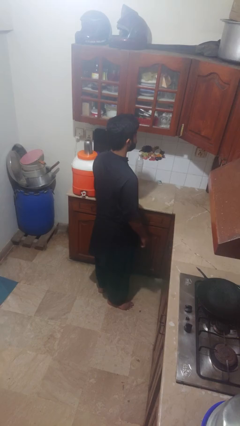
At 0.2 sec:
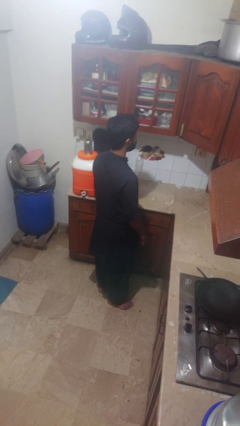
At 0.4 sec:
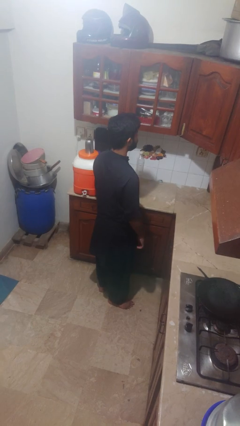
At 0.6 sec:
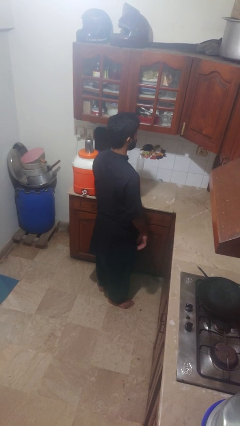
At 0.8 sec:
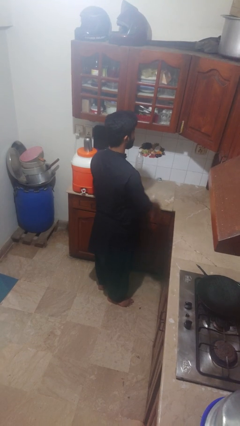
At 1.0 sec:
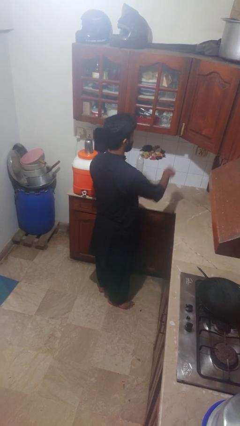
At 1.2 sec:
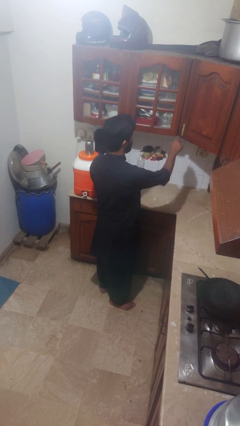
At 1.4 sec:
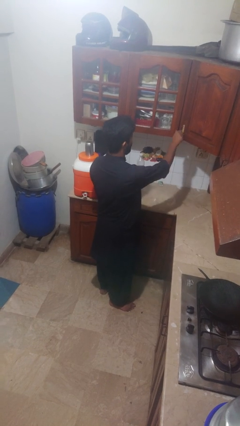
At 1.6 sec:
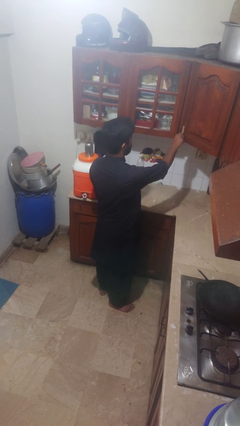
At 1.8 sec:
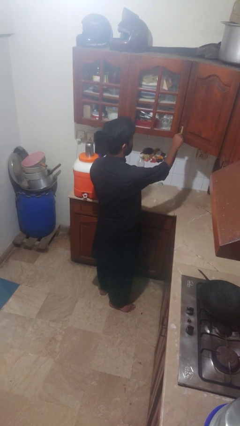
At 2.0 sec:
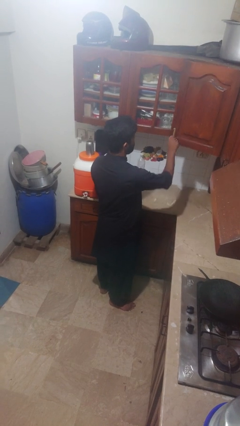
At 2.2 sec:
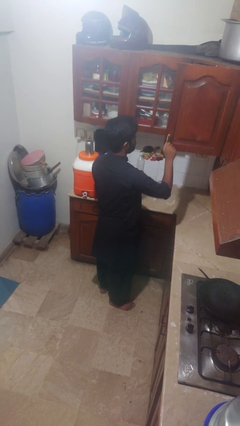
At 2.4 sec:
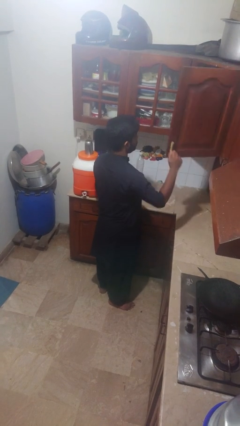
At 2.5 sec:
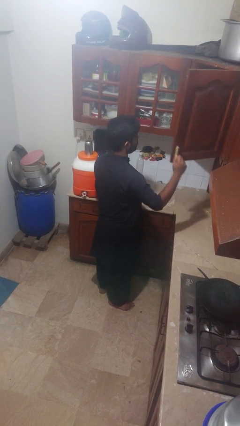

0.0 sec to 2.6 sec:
person opens cabinet

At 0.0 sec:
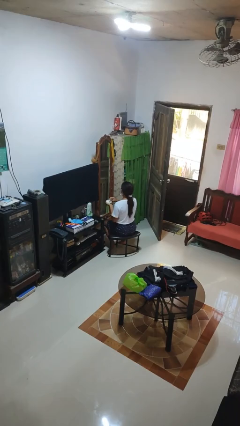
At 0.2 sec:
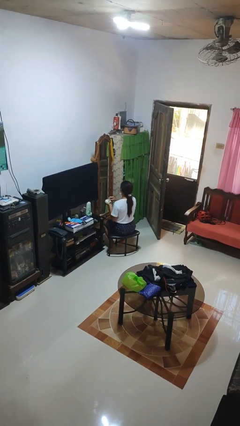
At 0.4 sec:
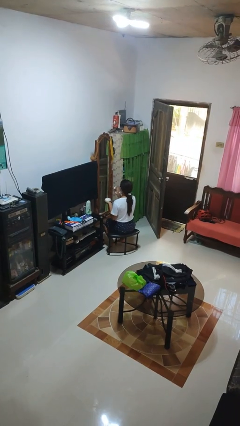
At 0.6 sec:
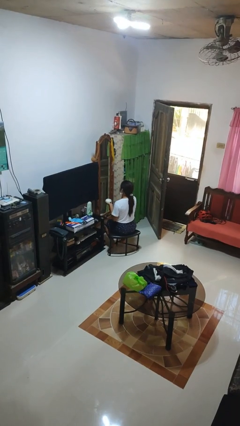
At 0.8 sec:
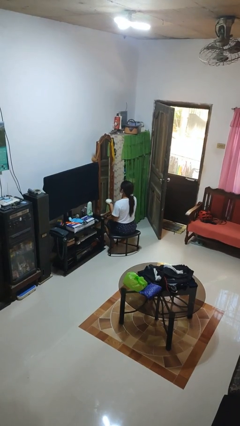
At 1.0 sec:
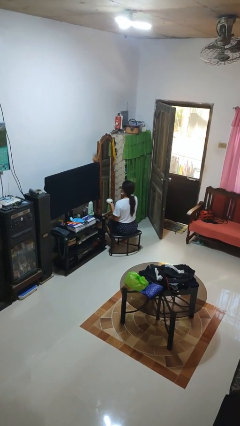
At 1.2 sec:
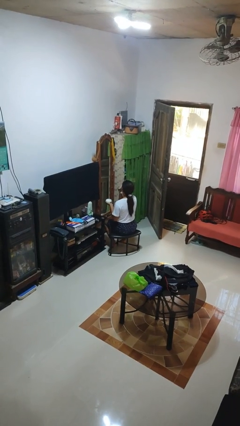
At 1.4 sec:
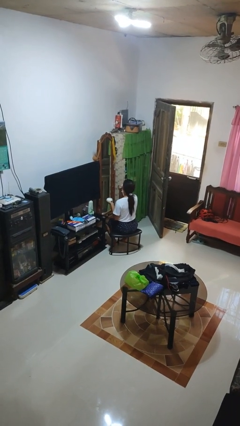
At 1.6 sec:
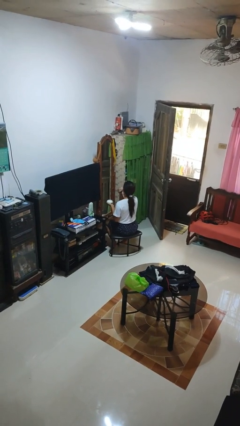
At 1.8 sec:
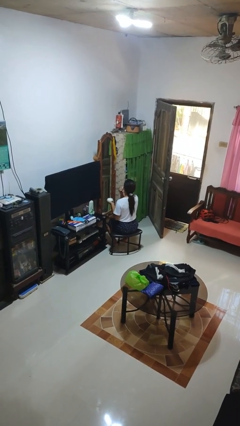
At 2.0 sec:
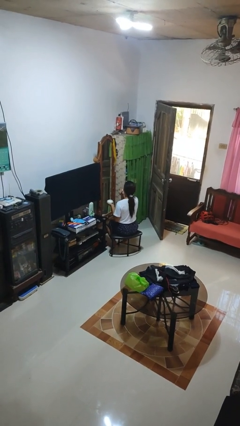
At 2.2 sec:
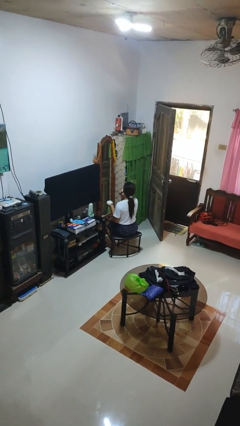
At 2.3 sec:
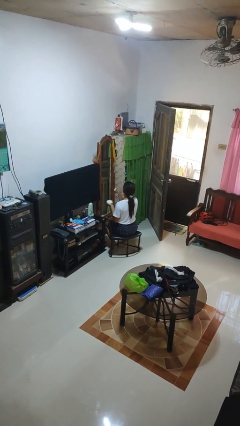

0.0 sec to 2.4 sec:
person applies foundation makeup

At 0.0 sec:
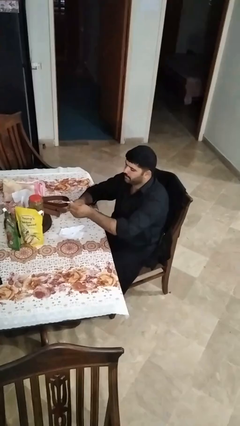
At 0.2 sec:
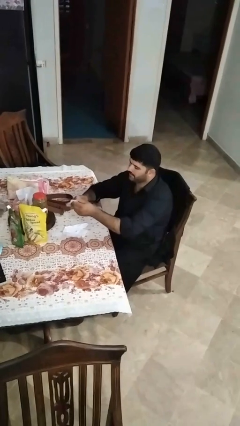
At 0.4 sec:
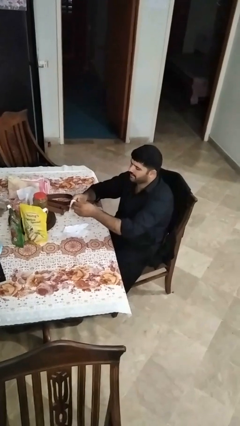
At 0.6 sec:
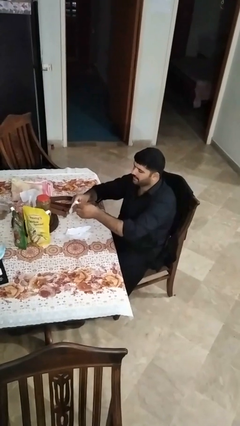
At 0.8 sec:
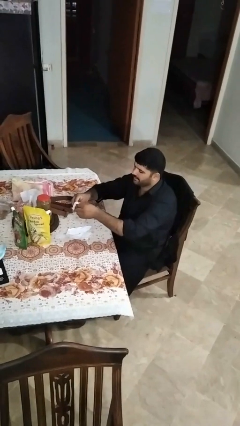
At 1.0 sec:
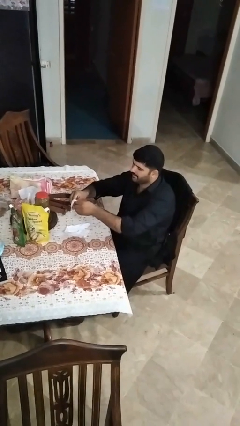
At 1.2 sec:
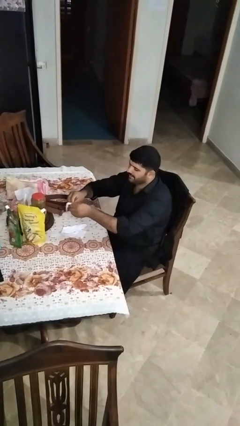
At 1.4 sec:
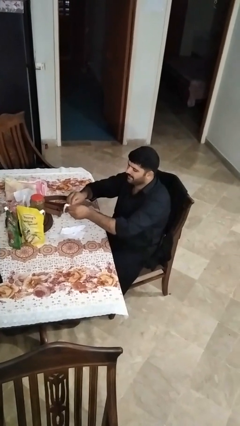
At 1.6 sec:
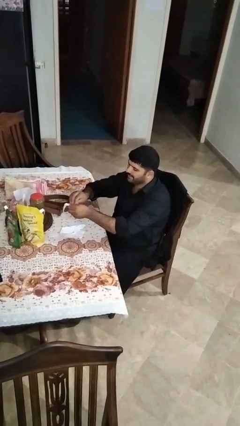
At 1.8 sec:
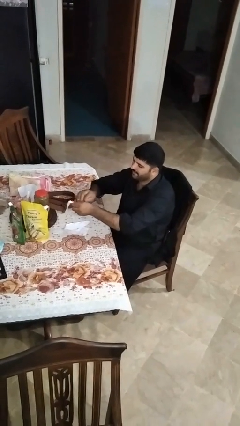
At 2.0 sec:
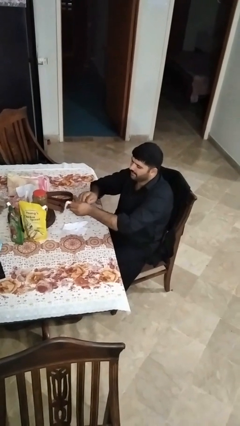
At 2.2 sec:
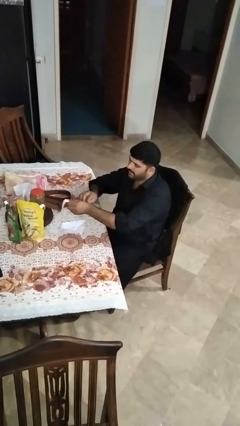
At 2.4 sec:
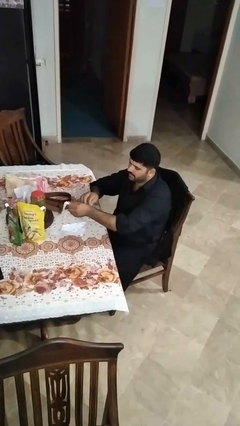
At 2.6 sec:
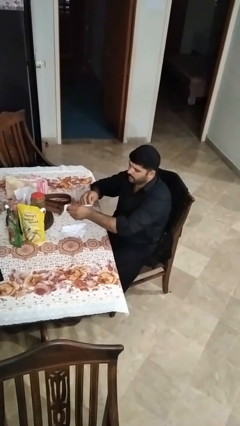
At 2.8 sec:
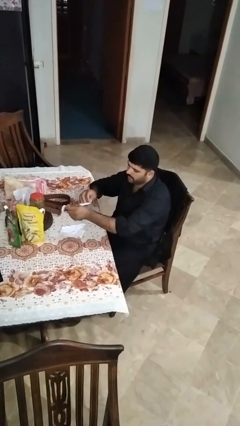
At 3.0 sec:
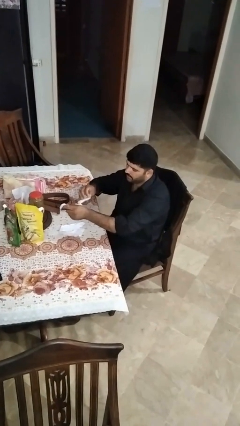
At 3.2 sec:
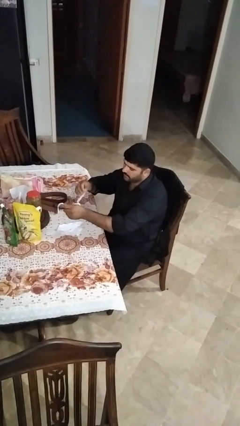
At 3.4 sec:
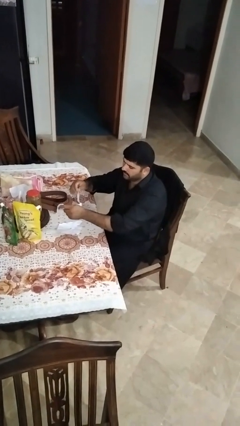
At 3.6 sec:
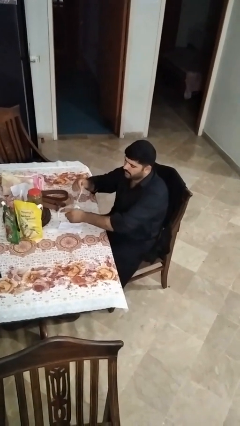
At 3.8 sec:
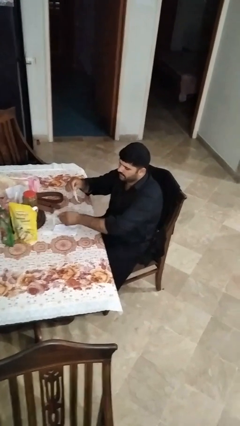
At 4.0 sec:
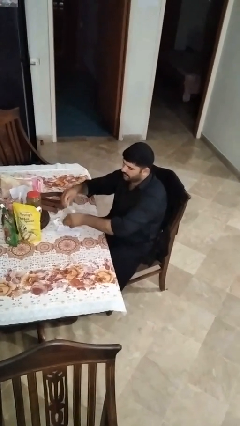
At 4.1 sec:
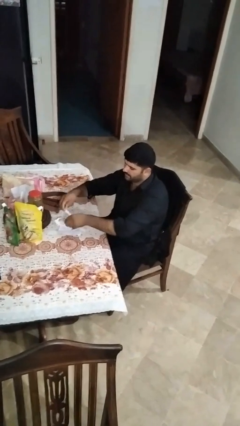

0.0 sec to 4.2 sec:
person tears paper

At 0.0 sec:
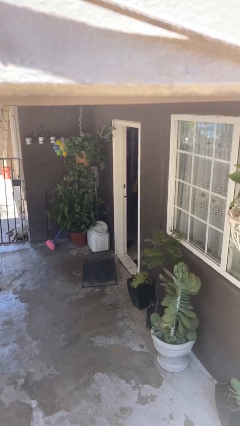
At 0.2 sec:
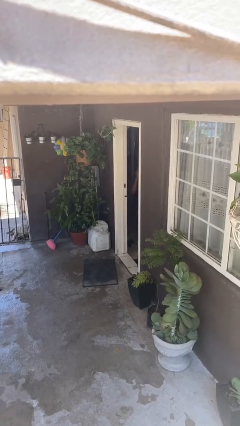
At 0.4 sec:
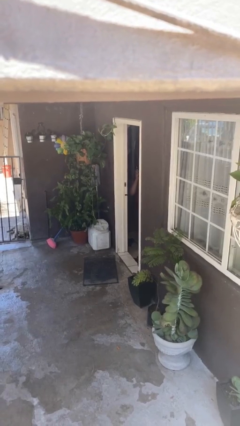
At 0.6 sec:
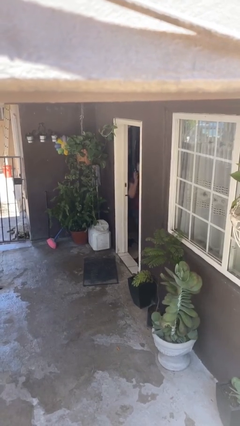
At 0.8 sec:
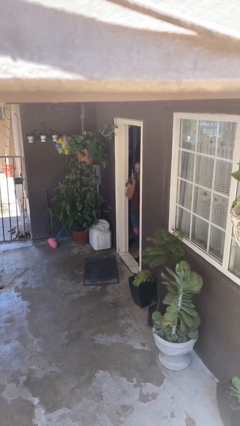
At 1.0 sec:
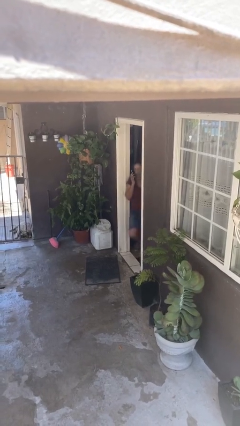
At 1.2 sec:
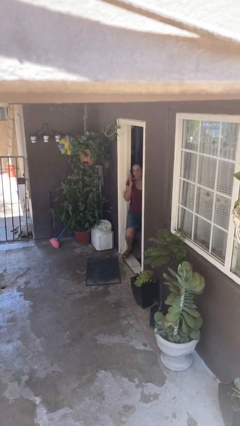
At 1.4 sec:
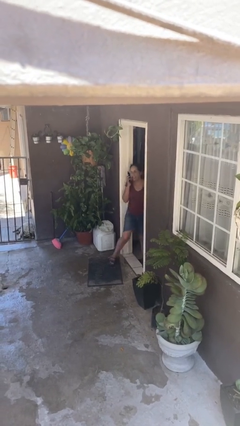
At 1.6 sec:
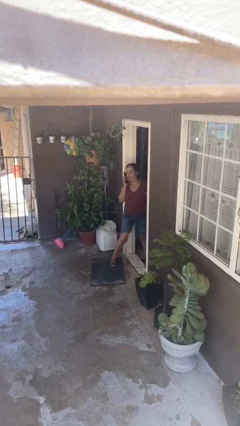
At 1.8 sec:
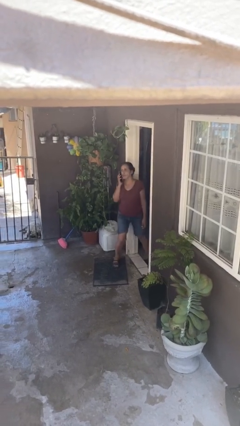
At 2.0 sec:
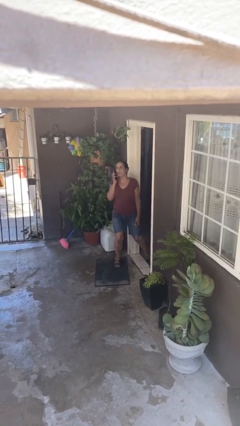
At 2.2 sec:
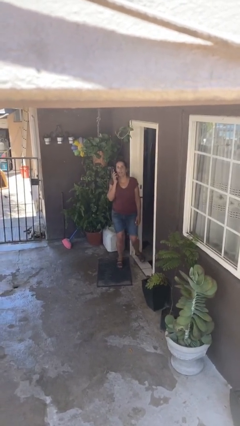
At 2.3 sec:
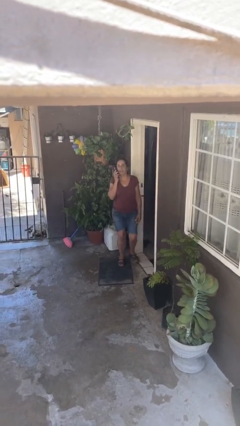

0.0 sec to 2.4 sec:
person enters scene through structure

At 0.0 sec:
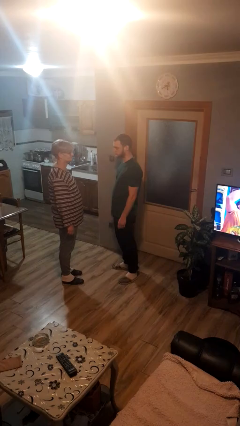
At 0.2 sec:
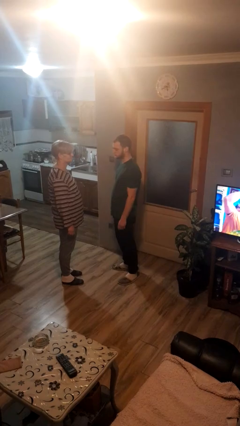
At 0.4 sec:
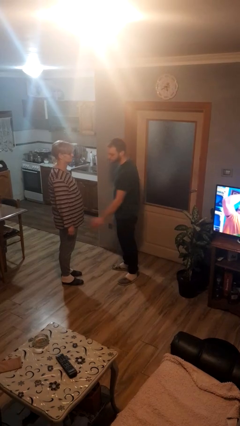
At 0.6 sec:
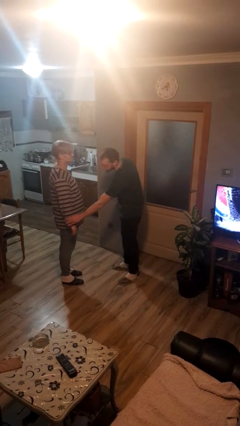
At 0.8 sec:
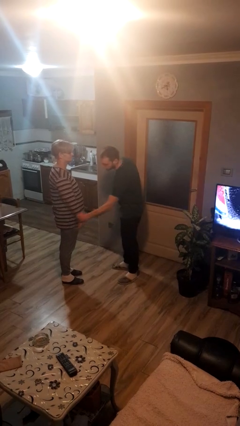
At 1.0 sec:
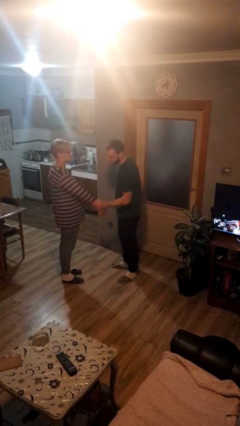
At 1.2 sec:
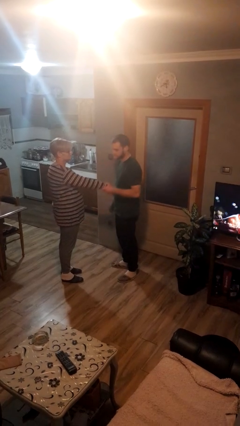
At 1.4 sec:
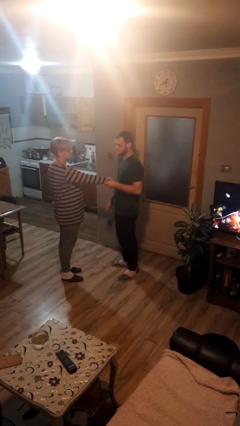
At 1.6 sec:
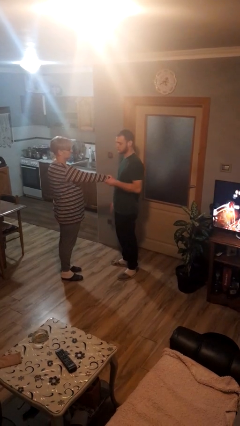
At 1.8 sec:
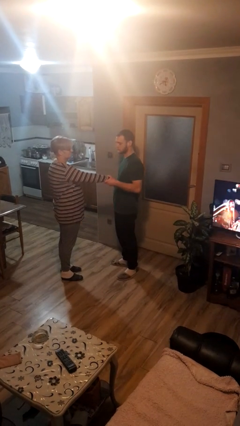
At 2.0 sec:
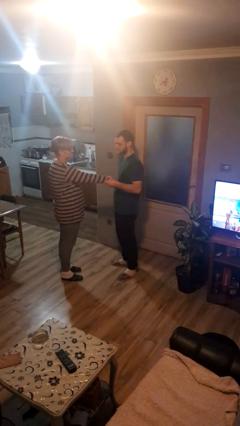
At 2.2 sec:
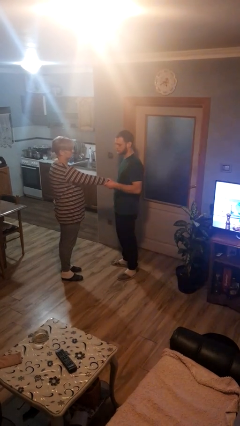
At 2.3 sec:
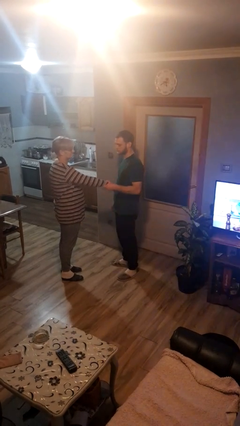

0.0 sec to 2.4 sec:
person grabs person by forearm

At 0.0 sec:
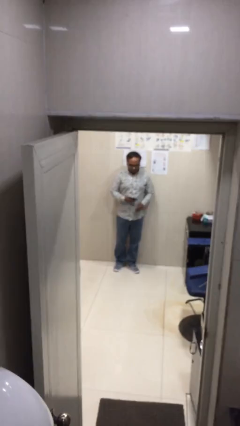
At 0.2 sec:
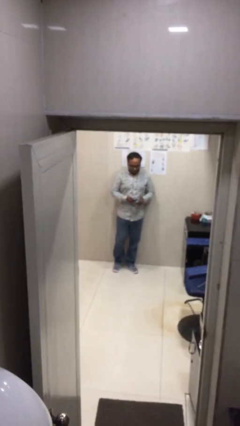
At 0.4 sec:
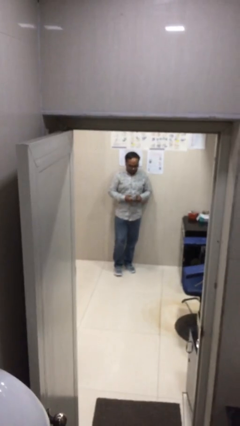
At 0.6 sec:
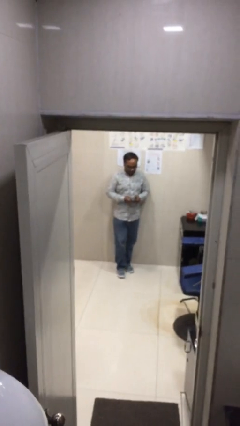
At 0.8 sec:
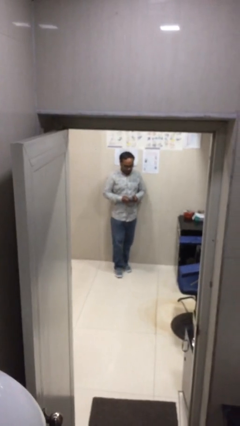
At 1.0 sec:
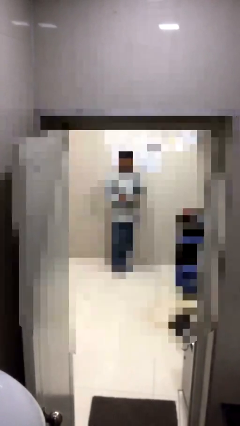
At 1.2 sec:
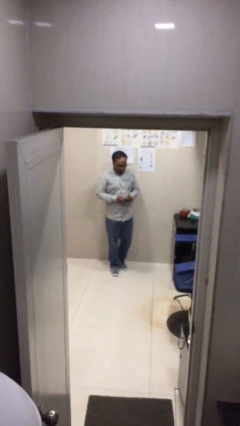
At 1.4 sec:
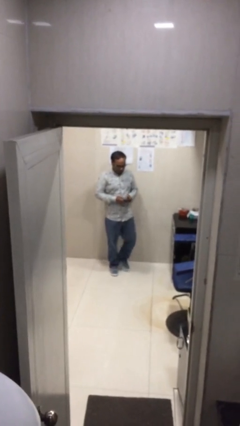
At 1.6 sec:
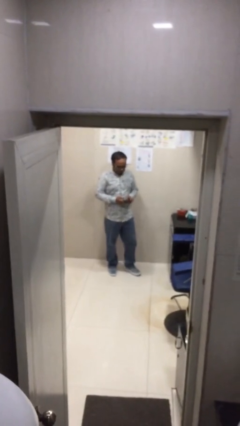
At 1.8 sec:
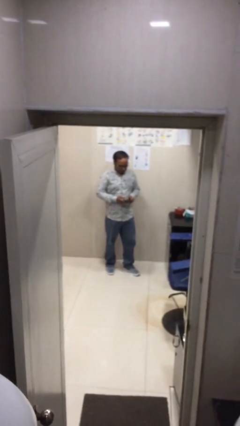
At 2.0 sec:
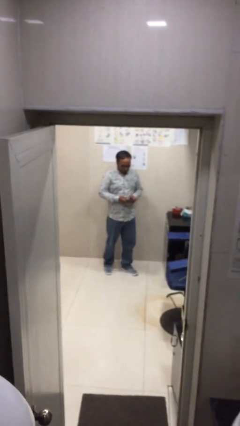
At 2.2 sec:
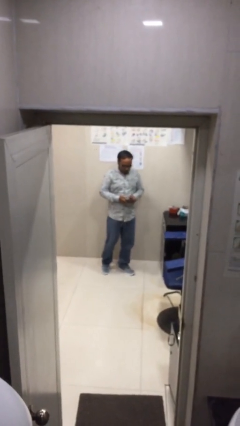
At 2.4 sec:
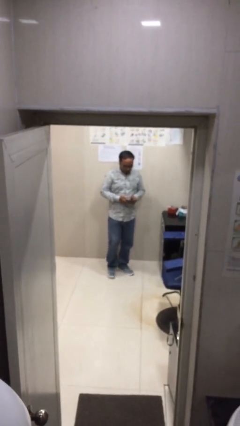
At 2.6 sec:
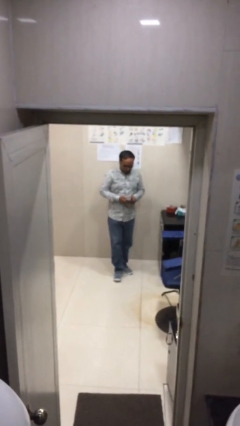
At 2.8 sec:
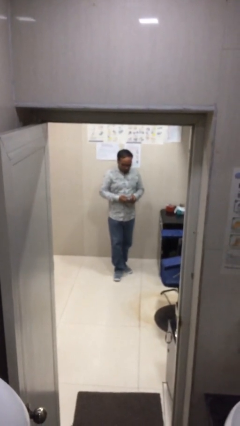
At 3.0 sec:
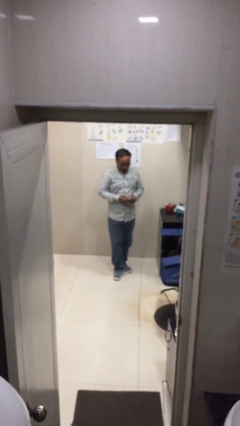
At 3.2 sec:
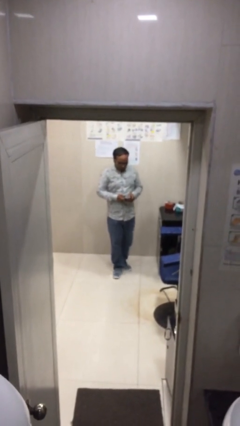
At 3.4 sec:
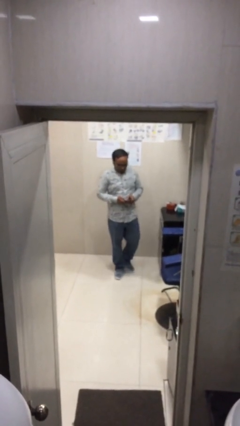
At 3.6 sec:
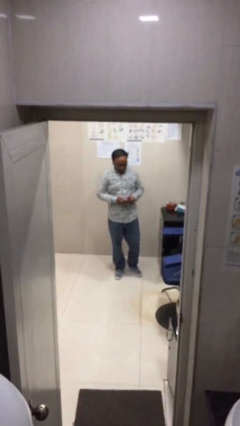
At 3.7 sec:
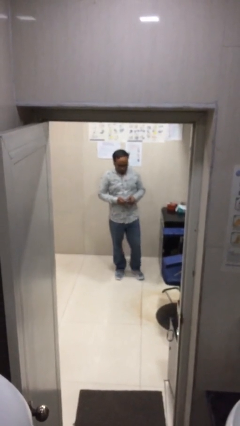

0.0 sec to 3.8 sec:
person texts on phone
